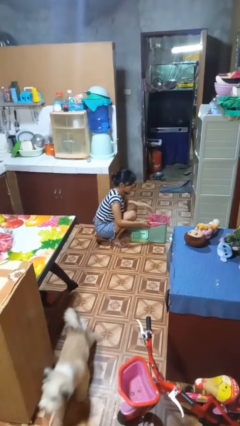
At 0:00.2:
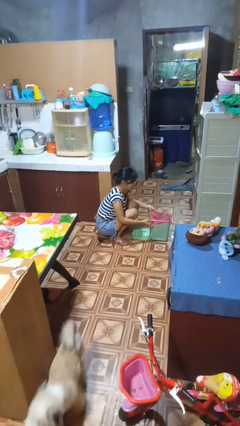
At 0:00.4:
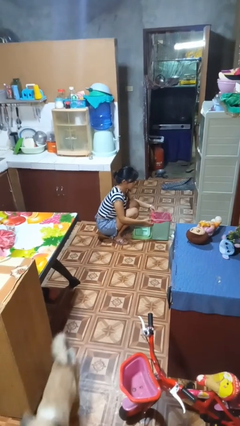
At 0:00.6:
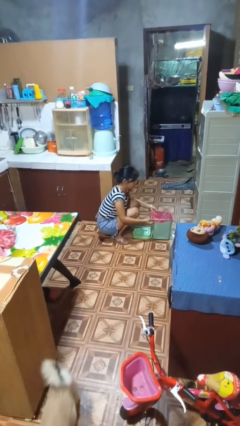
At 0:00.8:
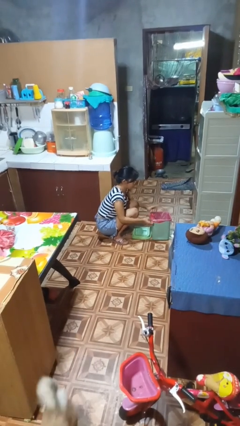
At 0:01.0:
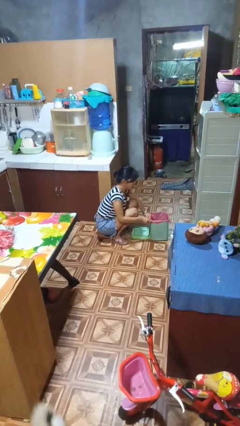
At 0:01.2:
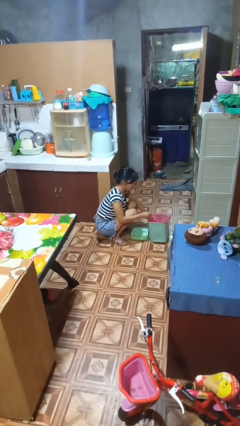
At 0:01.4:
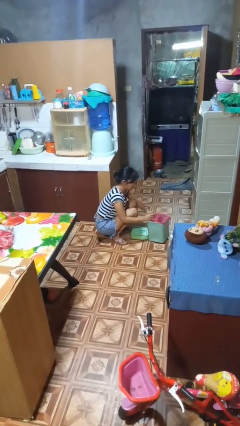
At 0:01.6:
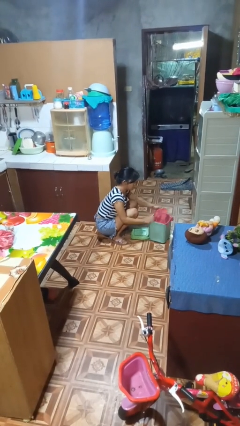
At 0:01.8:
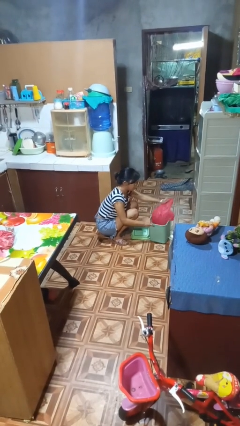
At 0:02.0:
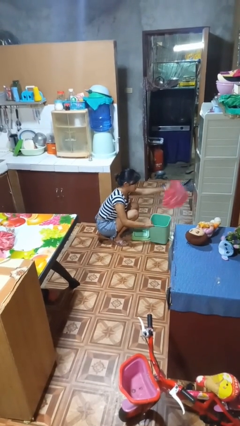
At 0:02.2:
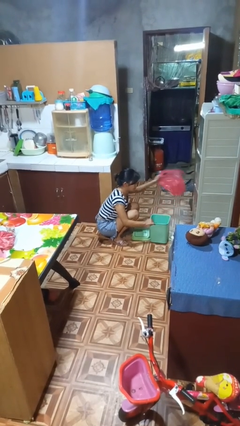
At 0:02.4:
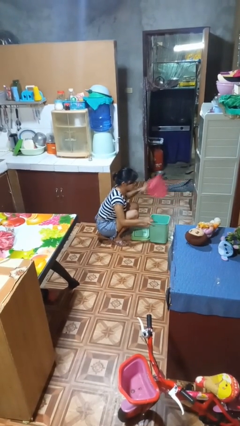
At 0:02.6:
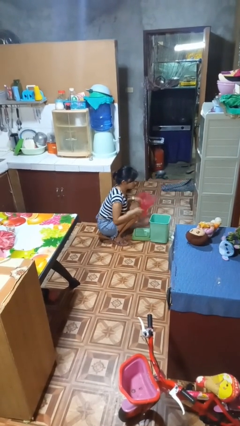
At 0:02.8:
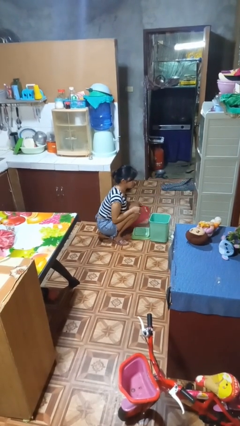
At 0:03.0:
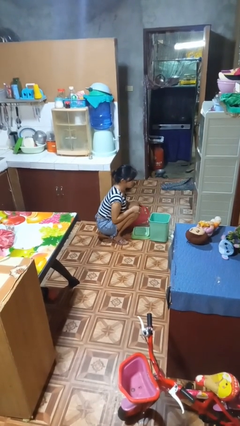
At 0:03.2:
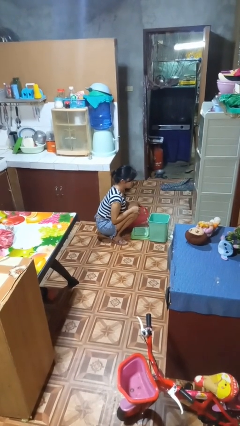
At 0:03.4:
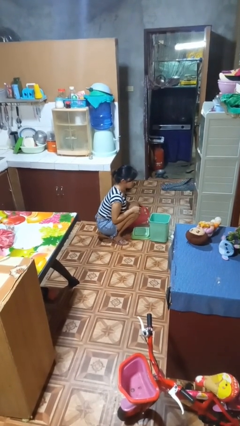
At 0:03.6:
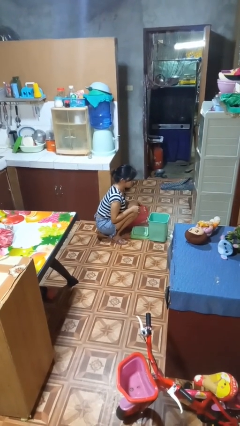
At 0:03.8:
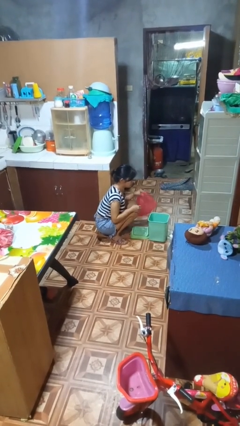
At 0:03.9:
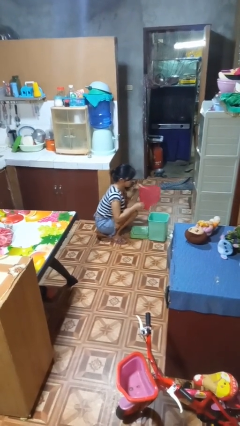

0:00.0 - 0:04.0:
person removes trashbag from trashcan

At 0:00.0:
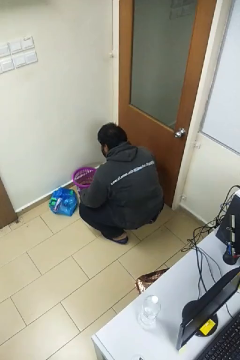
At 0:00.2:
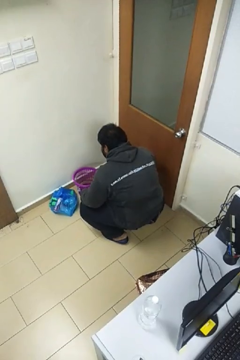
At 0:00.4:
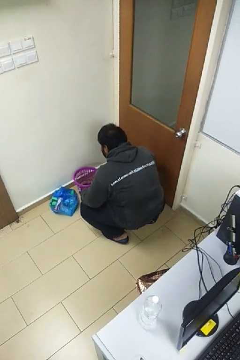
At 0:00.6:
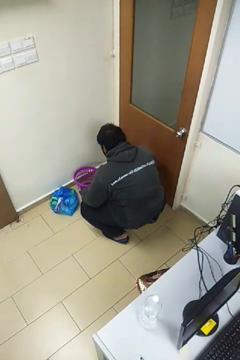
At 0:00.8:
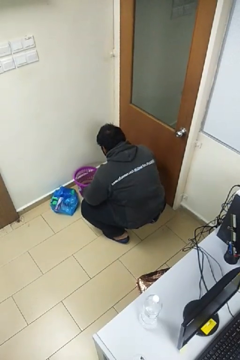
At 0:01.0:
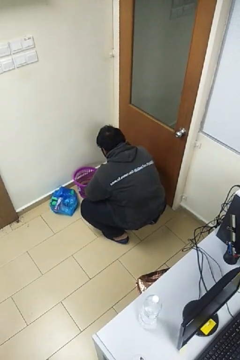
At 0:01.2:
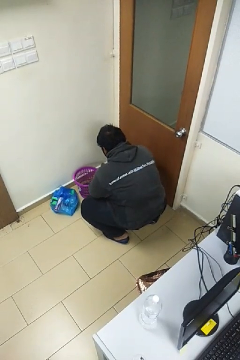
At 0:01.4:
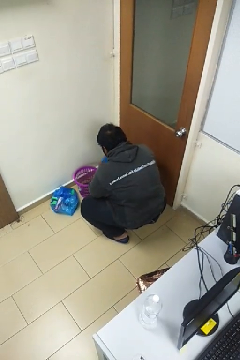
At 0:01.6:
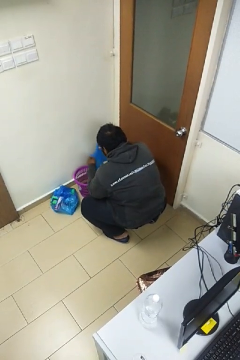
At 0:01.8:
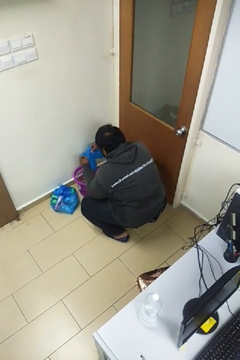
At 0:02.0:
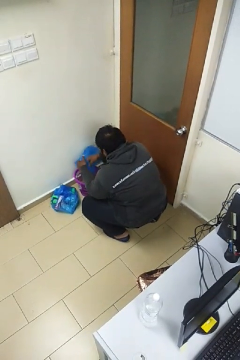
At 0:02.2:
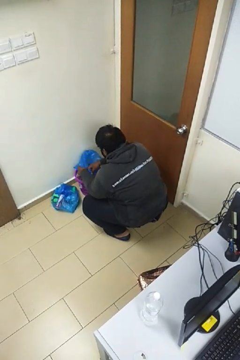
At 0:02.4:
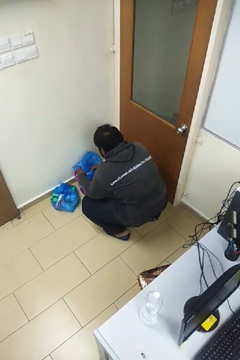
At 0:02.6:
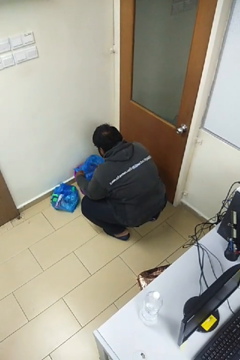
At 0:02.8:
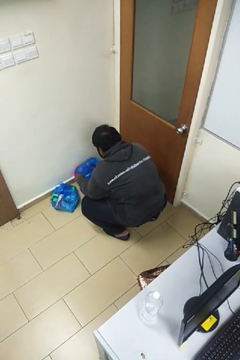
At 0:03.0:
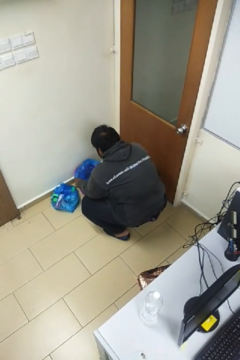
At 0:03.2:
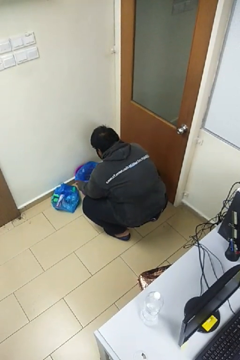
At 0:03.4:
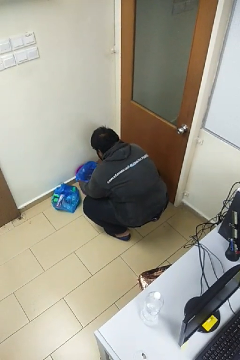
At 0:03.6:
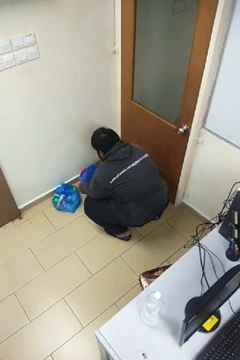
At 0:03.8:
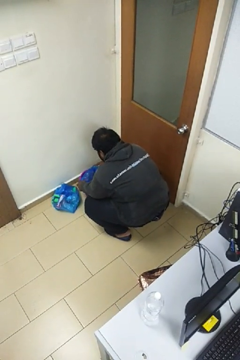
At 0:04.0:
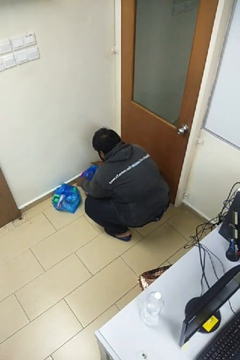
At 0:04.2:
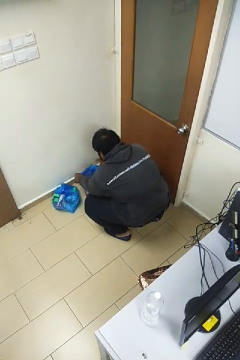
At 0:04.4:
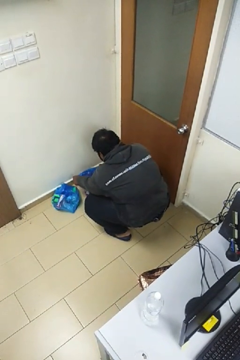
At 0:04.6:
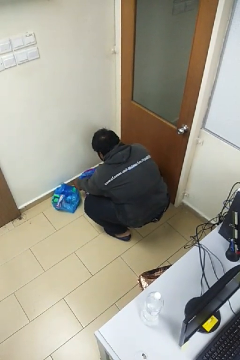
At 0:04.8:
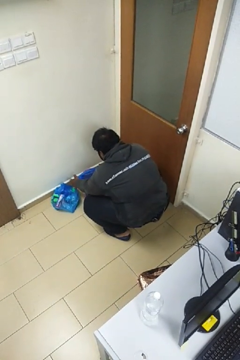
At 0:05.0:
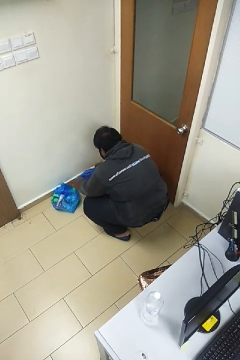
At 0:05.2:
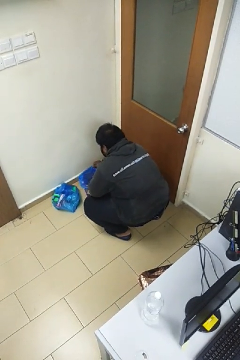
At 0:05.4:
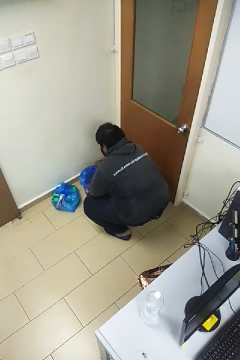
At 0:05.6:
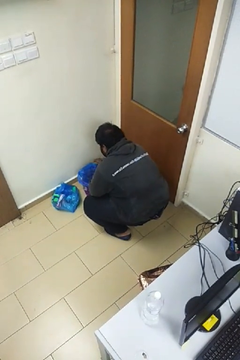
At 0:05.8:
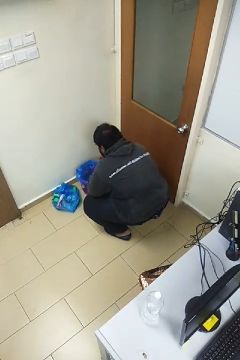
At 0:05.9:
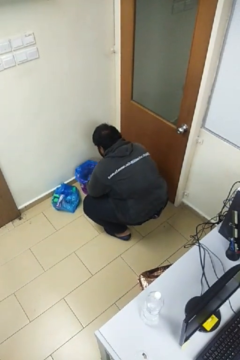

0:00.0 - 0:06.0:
person inserts trashbag into trashcan

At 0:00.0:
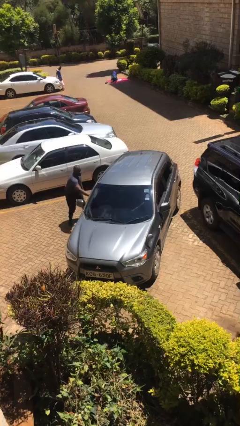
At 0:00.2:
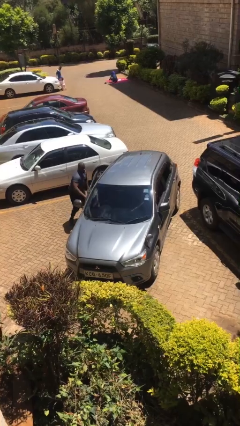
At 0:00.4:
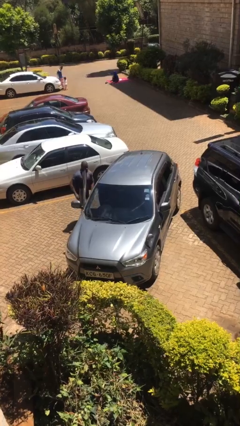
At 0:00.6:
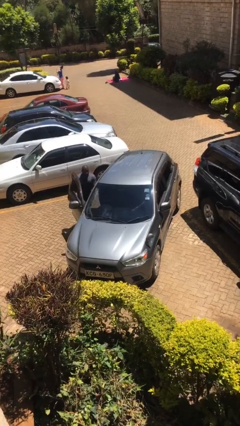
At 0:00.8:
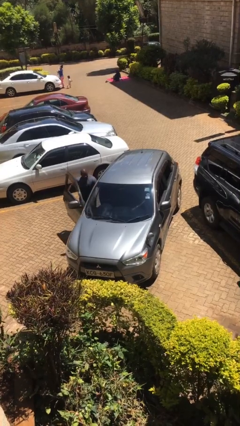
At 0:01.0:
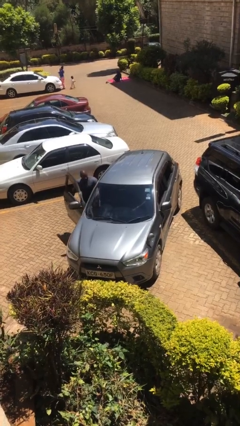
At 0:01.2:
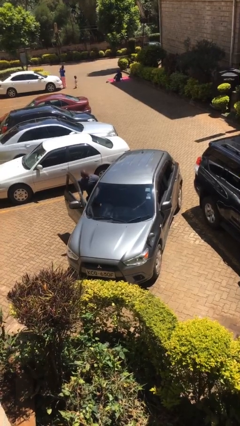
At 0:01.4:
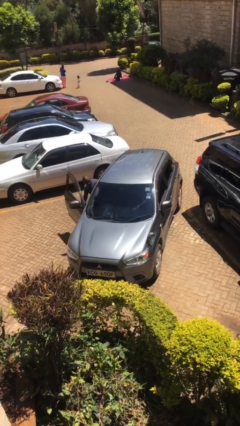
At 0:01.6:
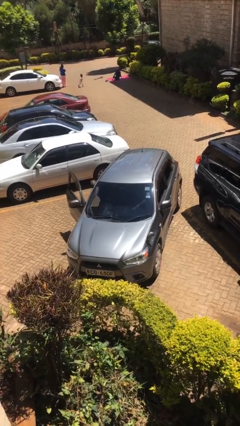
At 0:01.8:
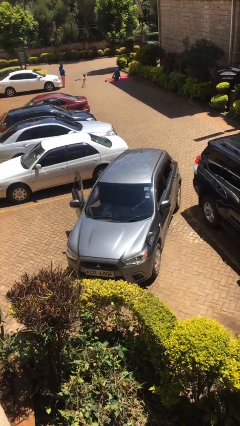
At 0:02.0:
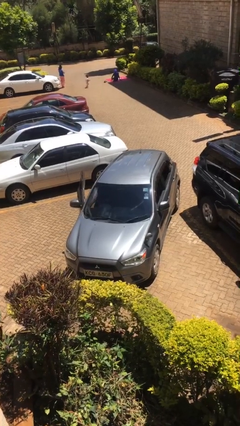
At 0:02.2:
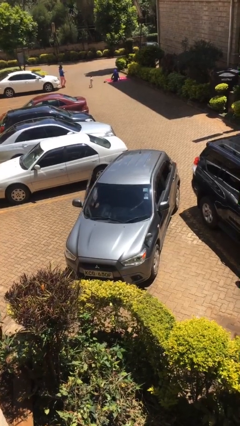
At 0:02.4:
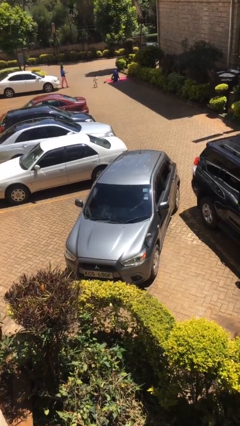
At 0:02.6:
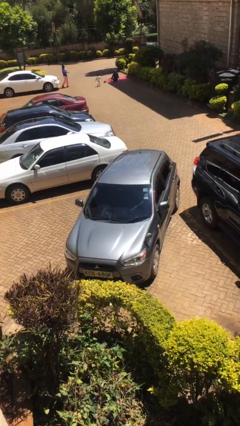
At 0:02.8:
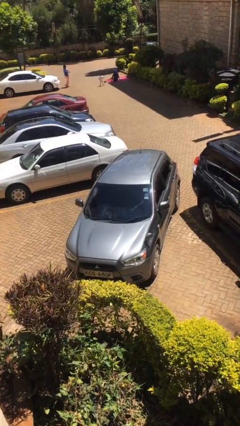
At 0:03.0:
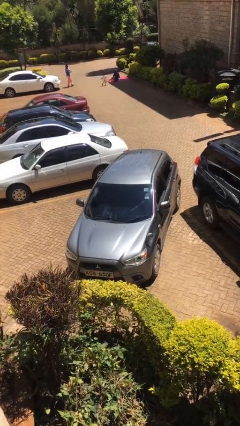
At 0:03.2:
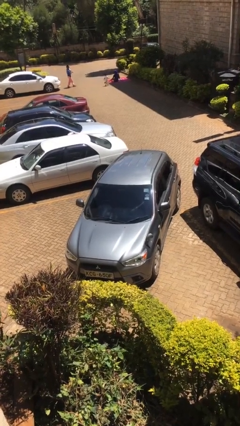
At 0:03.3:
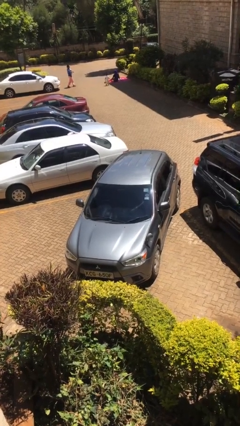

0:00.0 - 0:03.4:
car picks up person

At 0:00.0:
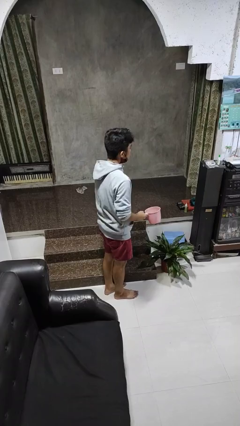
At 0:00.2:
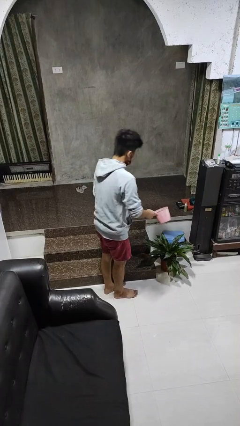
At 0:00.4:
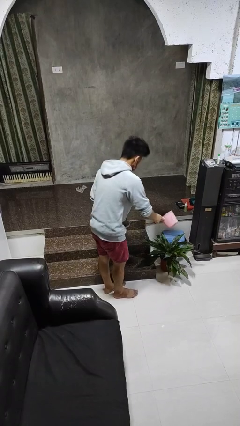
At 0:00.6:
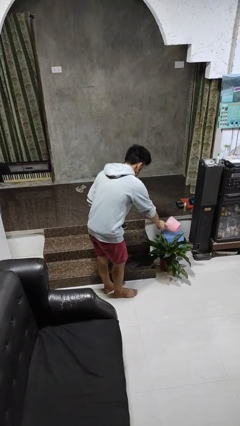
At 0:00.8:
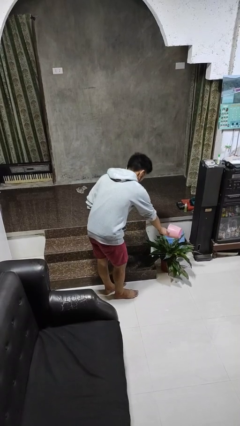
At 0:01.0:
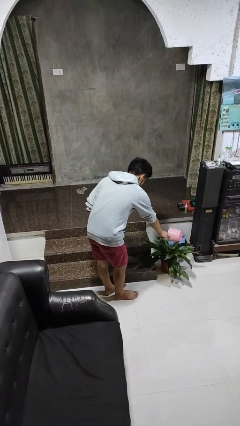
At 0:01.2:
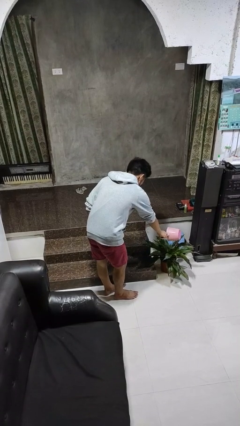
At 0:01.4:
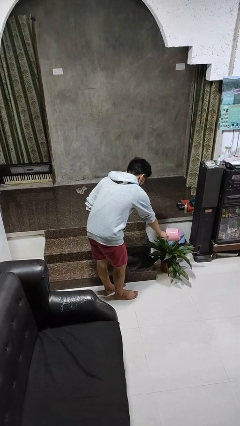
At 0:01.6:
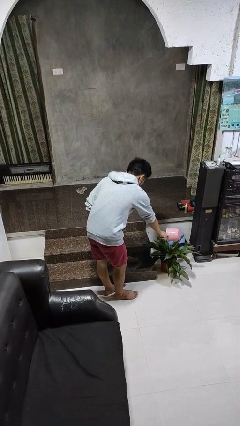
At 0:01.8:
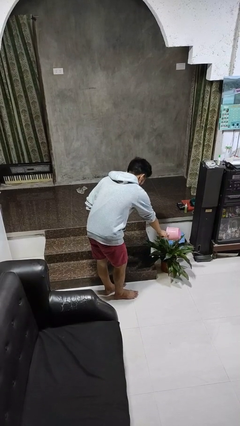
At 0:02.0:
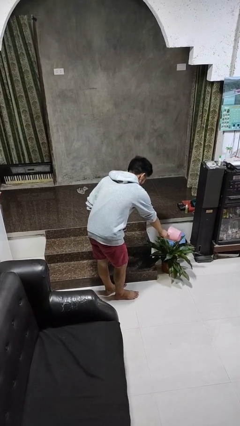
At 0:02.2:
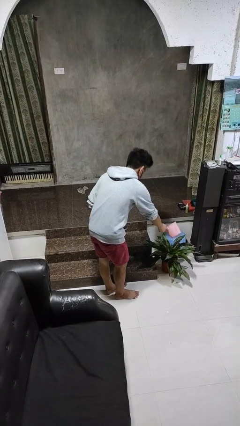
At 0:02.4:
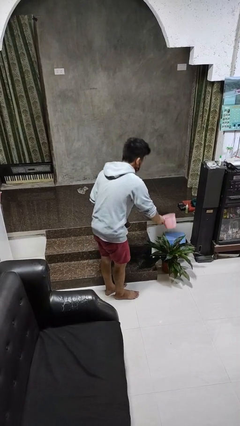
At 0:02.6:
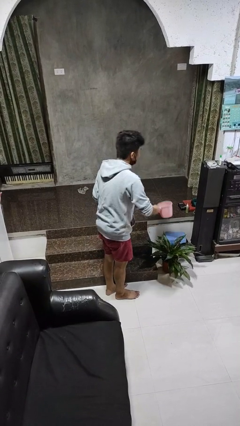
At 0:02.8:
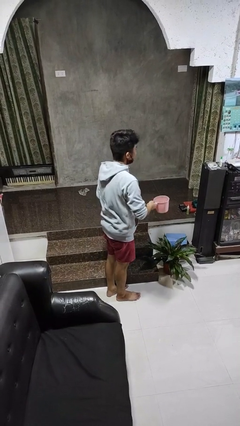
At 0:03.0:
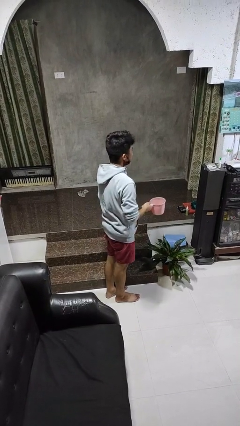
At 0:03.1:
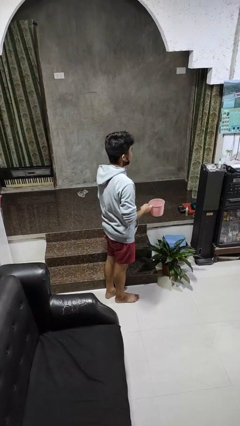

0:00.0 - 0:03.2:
person waters houseplant

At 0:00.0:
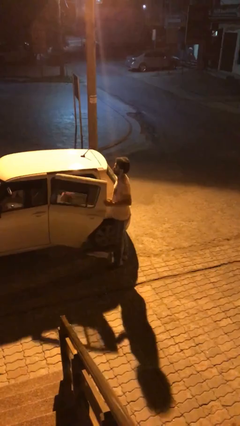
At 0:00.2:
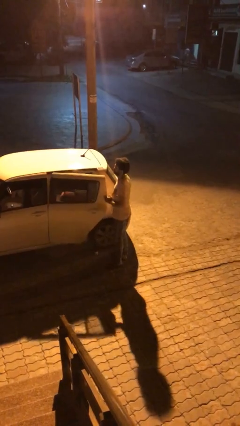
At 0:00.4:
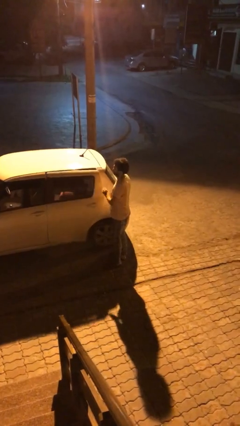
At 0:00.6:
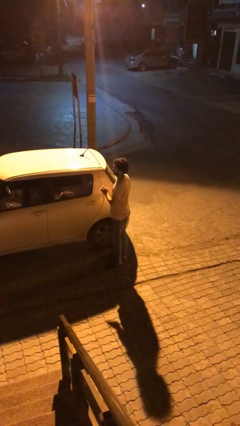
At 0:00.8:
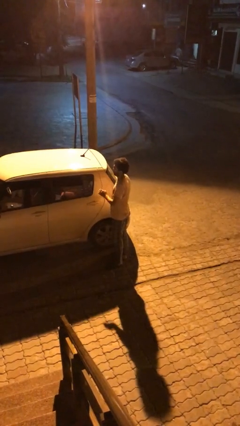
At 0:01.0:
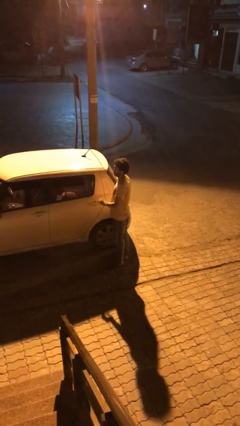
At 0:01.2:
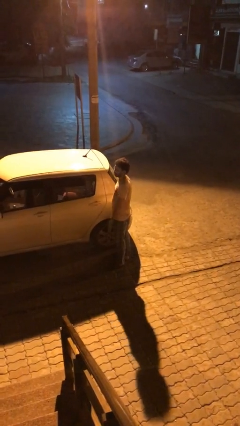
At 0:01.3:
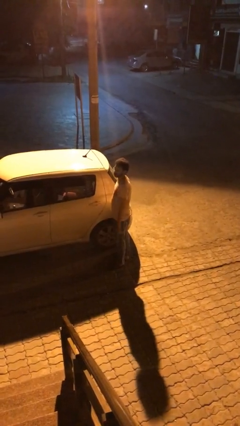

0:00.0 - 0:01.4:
person closes car door

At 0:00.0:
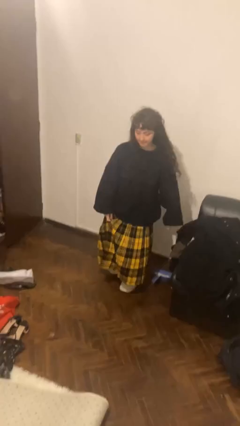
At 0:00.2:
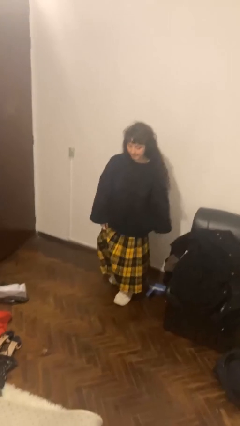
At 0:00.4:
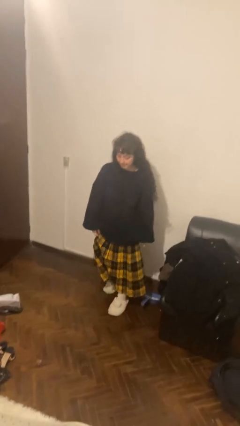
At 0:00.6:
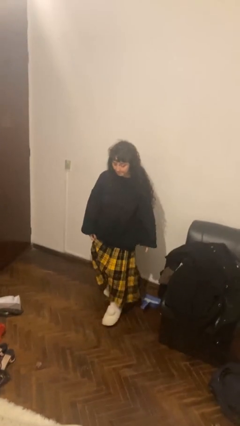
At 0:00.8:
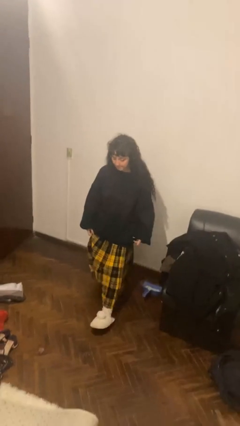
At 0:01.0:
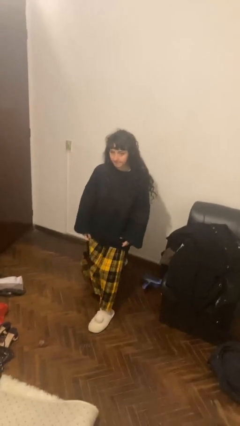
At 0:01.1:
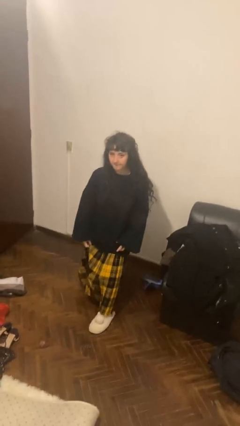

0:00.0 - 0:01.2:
person stands up from floor
